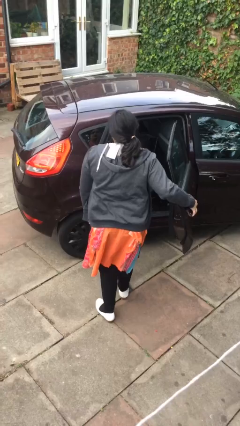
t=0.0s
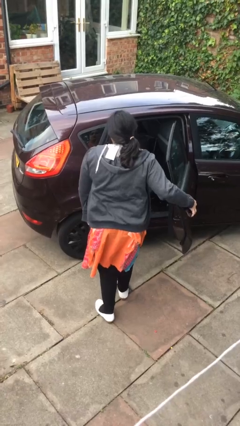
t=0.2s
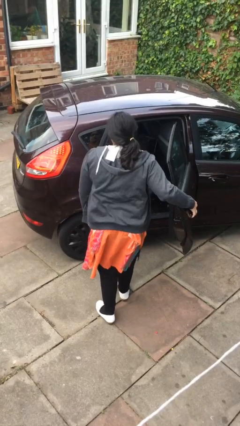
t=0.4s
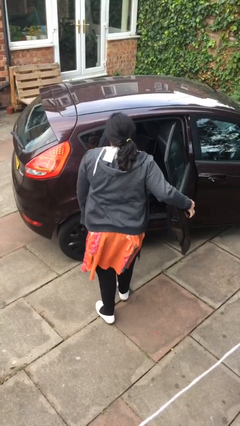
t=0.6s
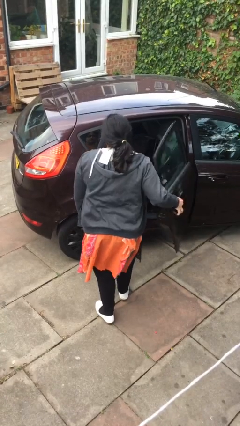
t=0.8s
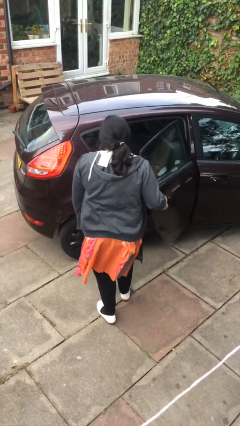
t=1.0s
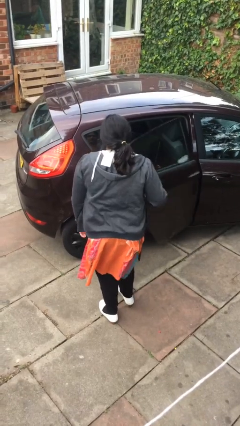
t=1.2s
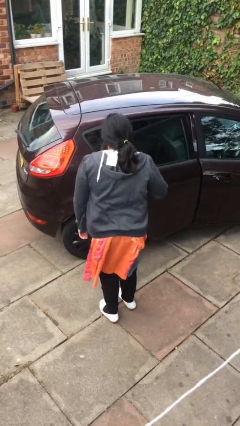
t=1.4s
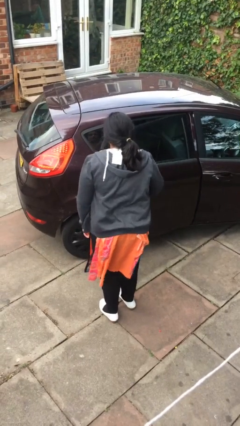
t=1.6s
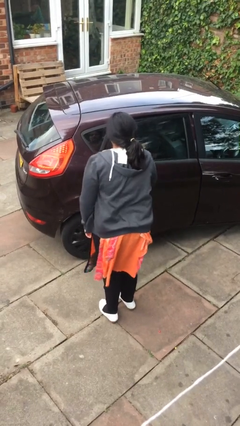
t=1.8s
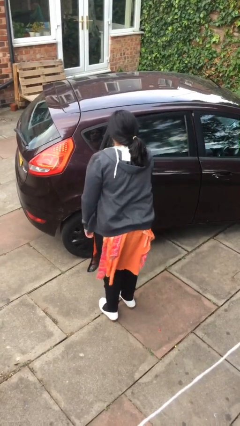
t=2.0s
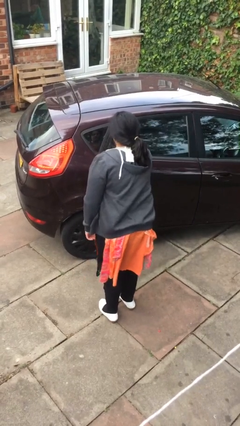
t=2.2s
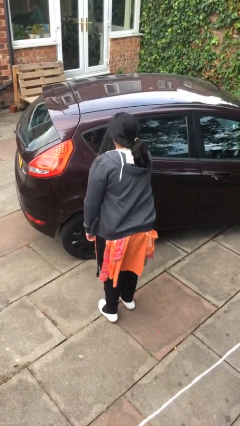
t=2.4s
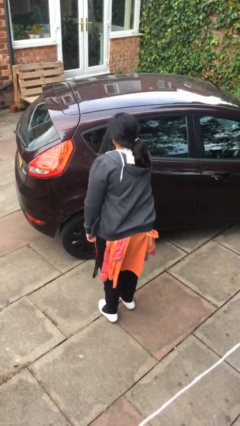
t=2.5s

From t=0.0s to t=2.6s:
person closes car door

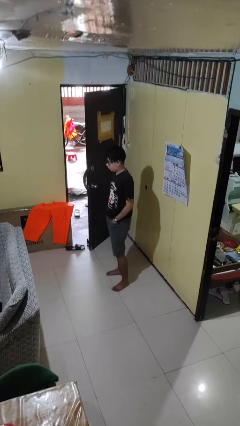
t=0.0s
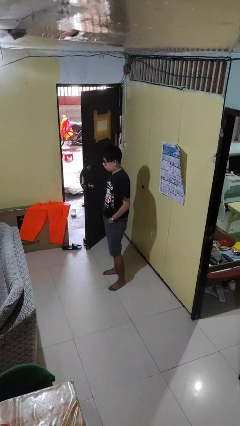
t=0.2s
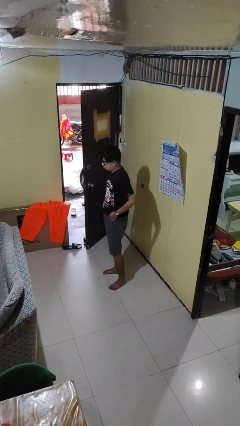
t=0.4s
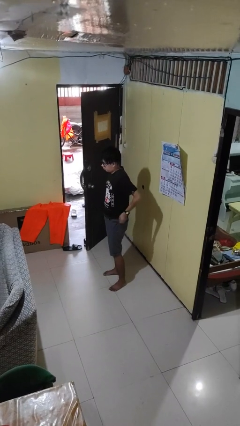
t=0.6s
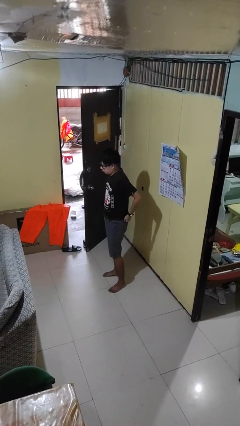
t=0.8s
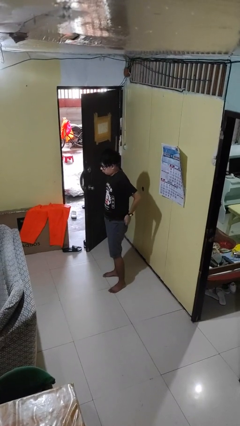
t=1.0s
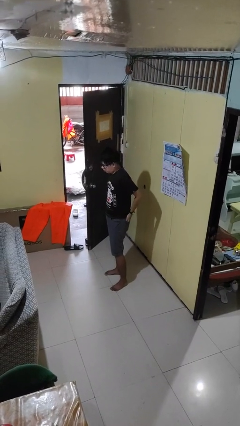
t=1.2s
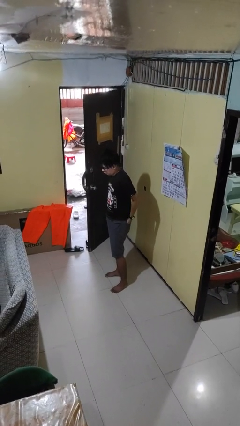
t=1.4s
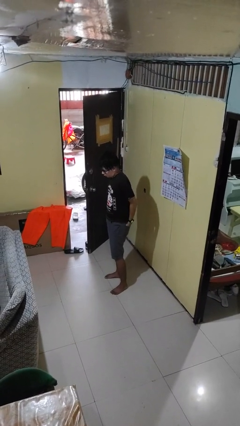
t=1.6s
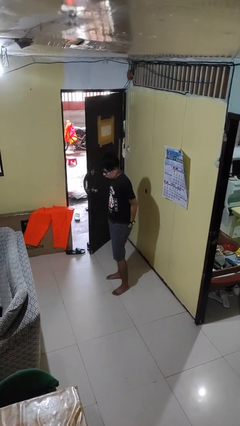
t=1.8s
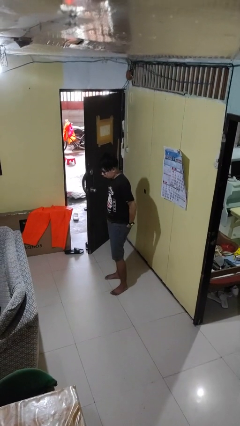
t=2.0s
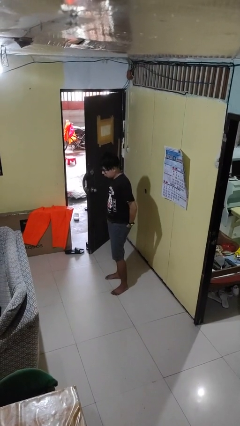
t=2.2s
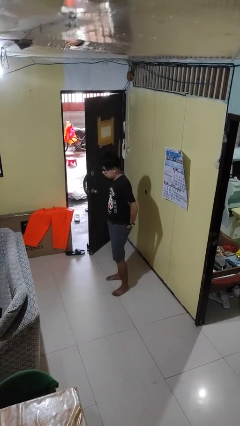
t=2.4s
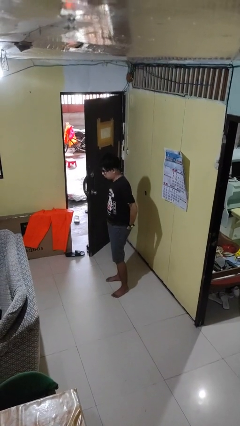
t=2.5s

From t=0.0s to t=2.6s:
person puts hands in back pockets

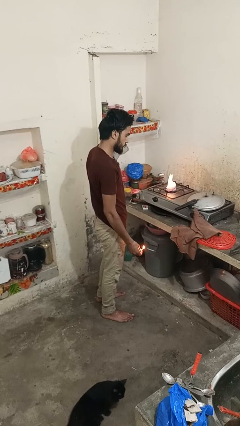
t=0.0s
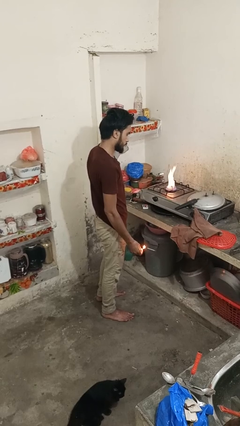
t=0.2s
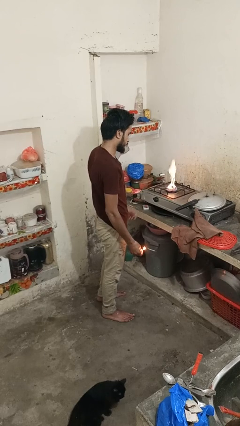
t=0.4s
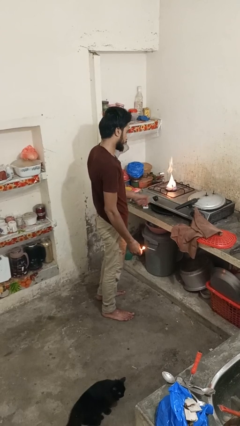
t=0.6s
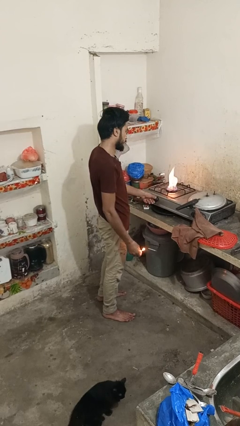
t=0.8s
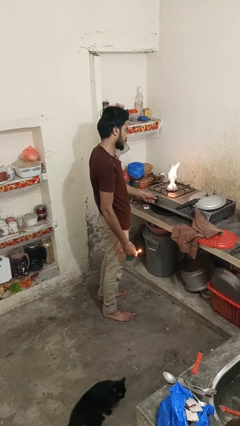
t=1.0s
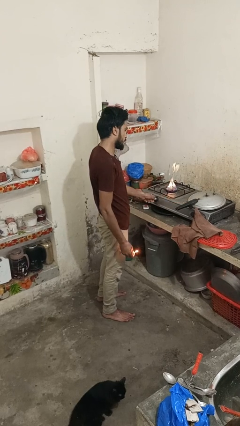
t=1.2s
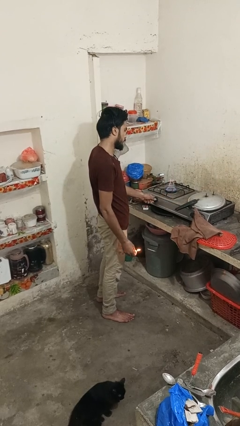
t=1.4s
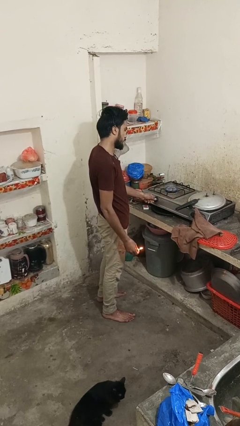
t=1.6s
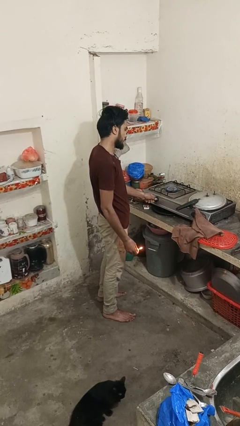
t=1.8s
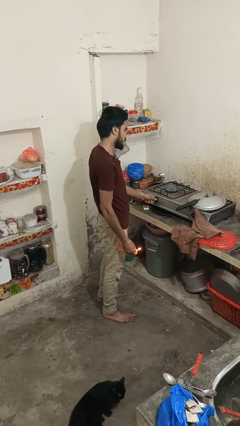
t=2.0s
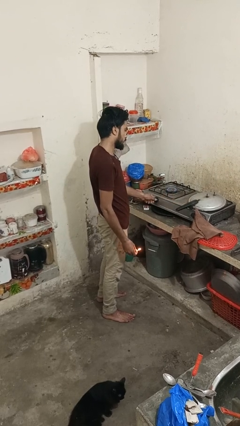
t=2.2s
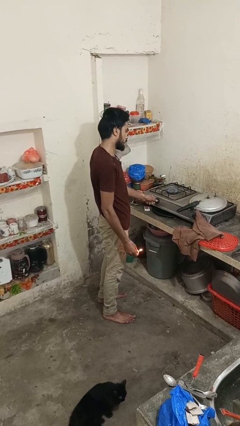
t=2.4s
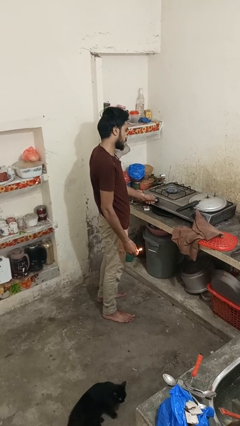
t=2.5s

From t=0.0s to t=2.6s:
person turns off stovetop

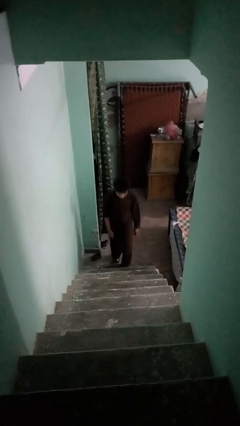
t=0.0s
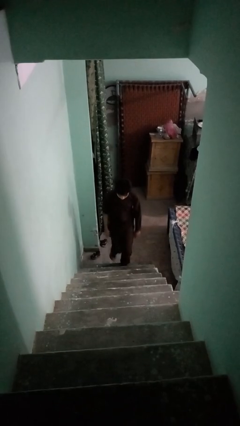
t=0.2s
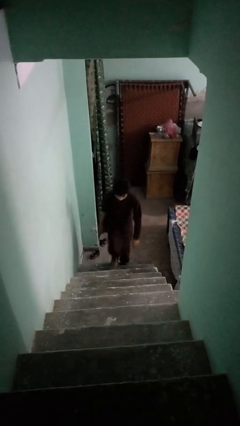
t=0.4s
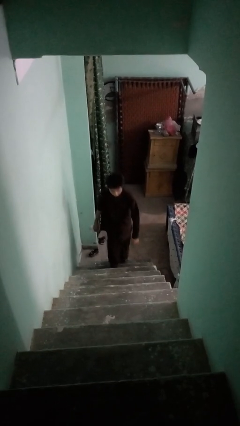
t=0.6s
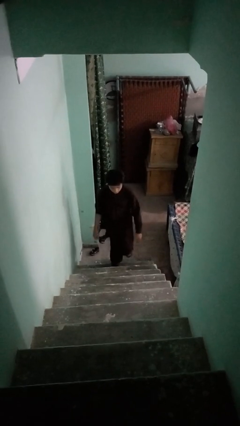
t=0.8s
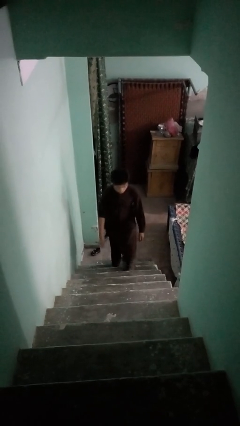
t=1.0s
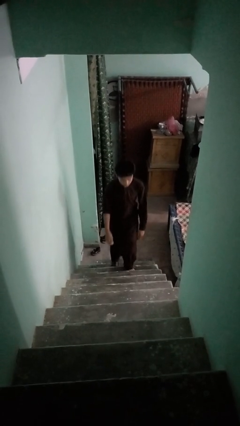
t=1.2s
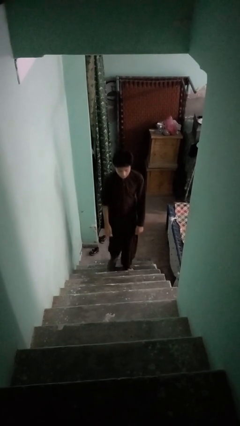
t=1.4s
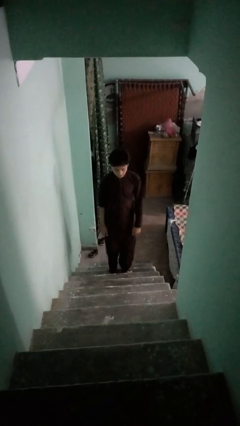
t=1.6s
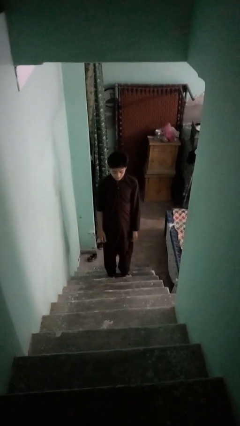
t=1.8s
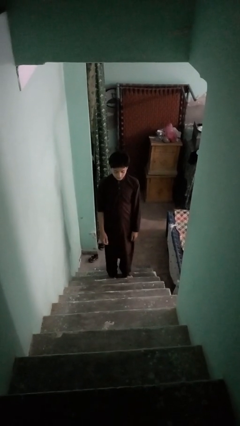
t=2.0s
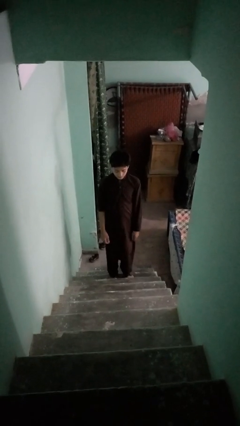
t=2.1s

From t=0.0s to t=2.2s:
person climbs up stairs

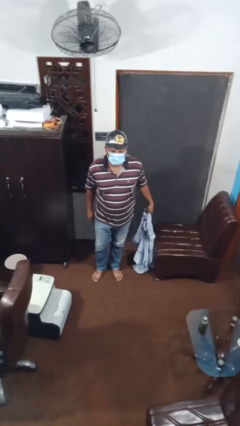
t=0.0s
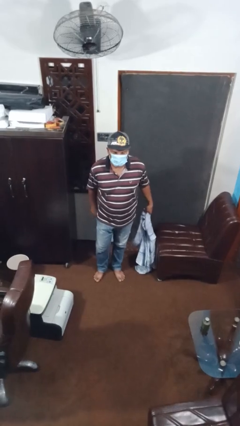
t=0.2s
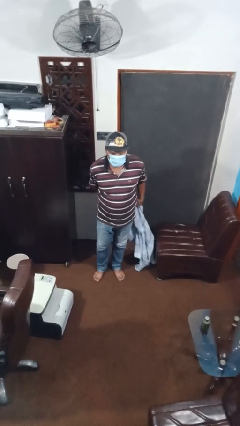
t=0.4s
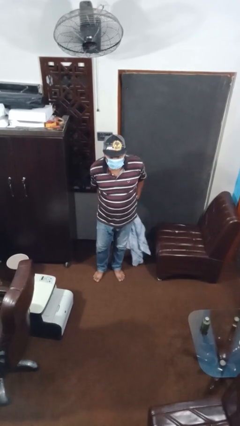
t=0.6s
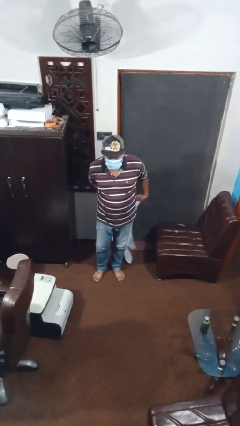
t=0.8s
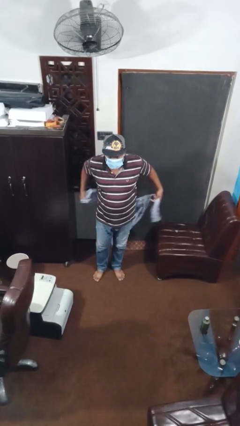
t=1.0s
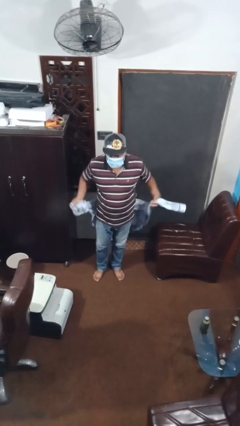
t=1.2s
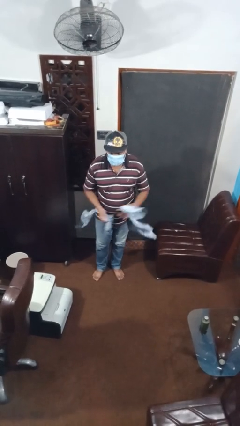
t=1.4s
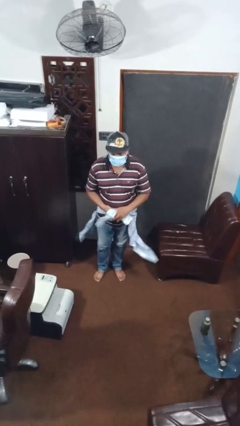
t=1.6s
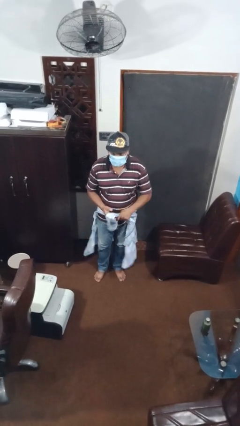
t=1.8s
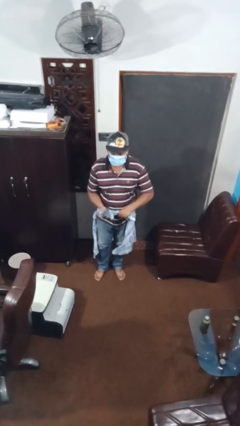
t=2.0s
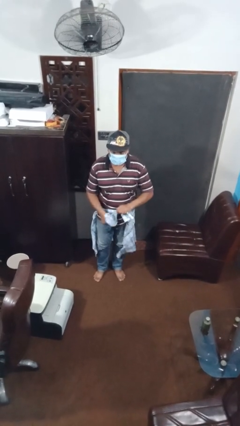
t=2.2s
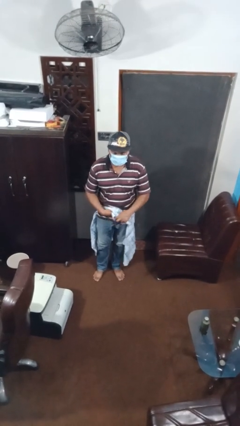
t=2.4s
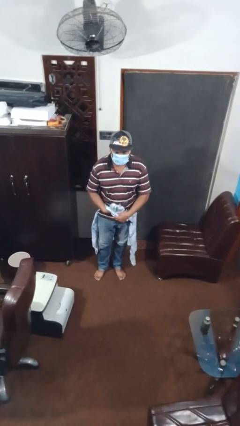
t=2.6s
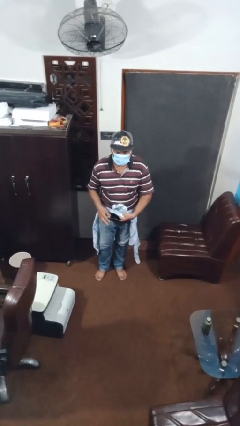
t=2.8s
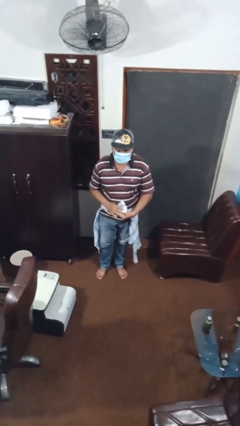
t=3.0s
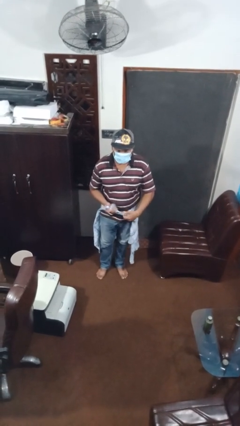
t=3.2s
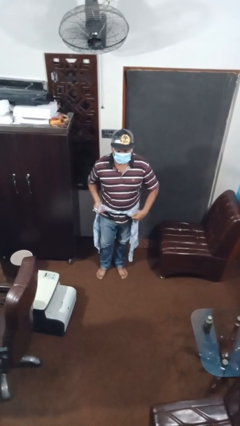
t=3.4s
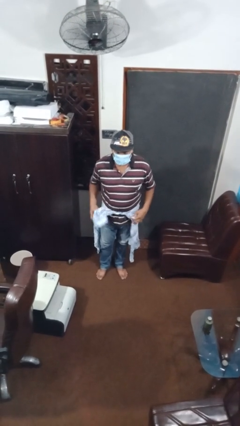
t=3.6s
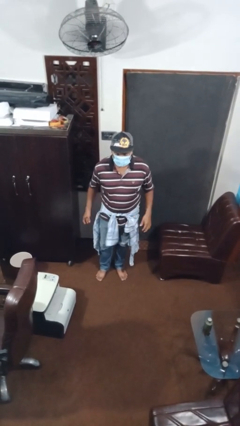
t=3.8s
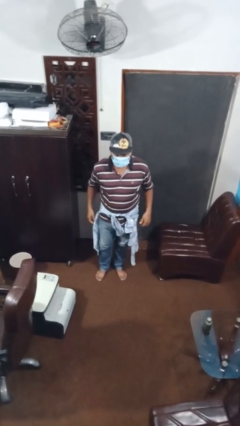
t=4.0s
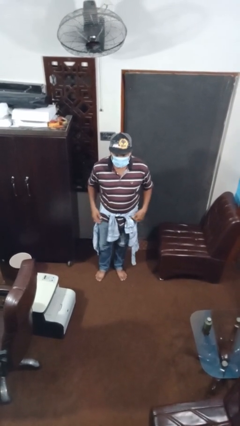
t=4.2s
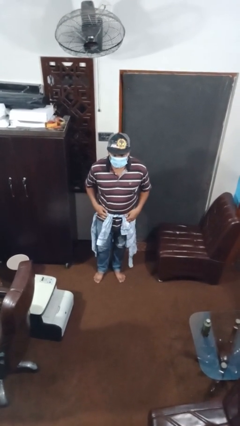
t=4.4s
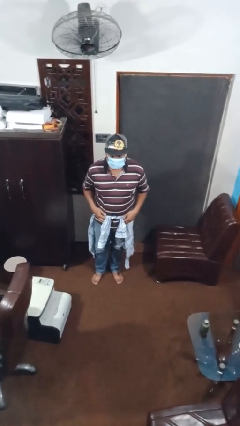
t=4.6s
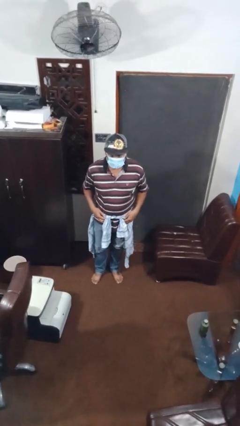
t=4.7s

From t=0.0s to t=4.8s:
person ties jacket around waist

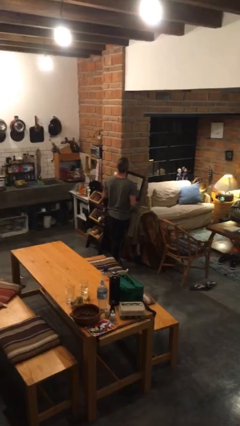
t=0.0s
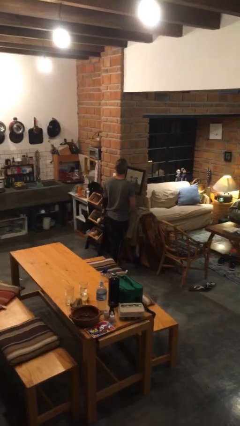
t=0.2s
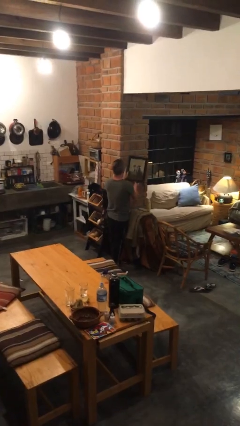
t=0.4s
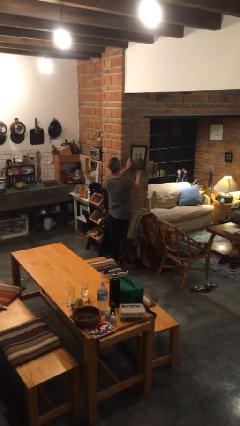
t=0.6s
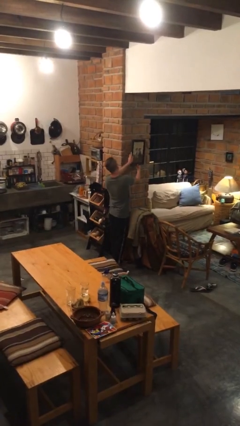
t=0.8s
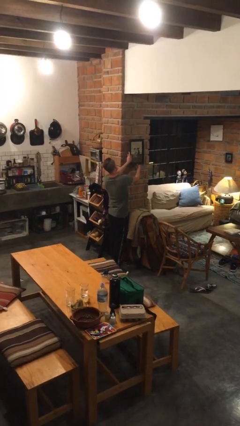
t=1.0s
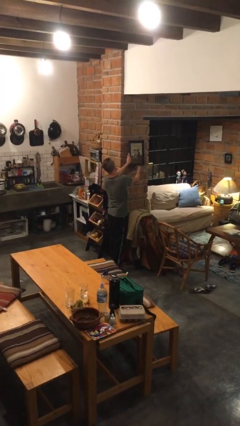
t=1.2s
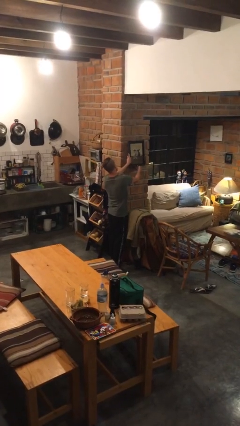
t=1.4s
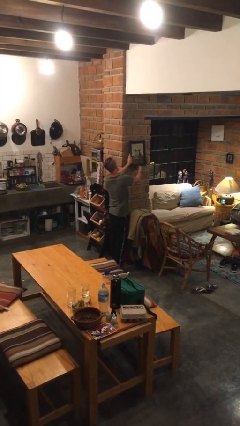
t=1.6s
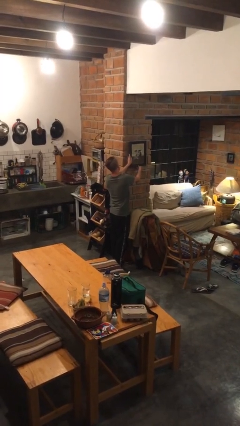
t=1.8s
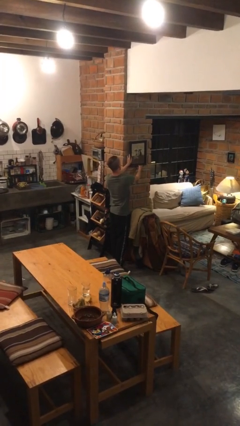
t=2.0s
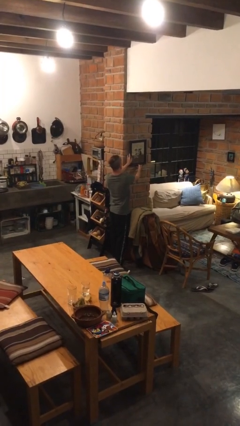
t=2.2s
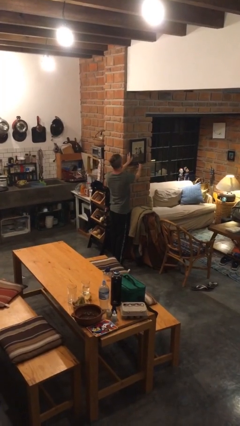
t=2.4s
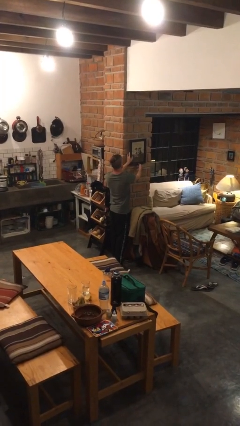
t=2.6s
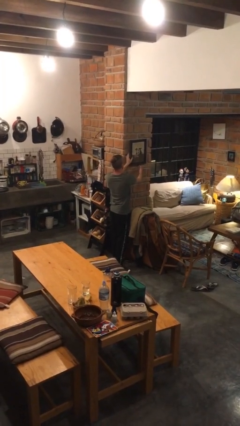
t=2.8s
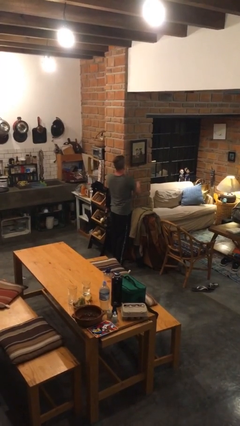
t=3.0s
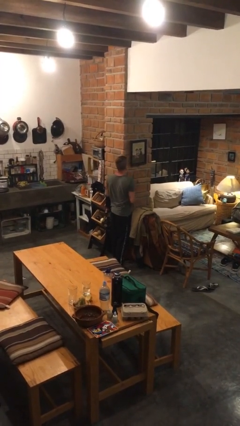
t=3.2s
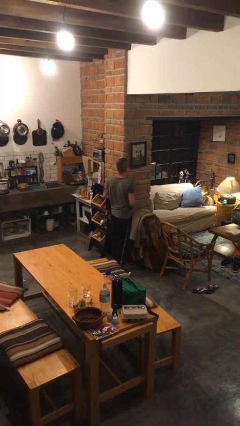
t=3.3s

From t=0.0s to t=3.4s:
person puts up picture frame
